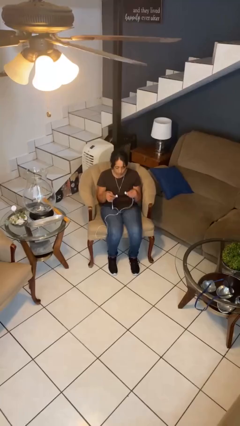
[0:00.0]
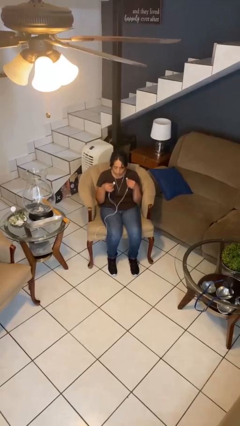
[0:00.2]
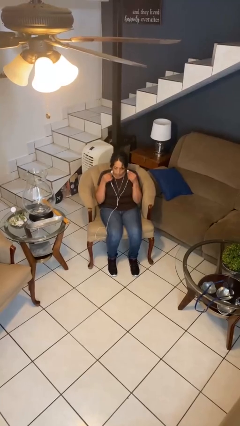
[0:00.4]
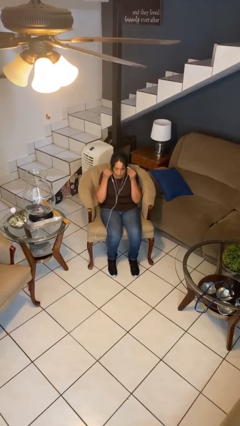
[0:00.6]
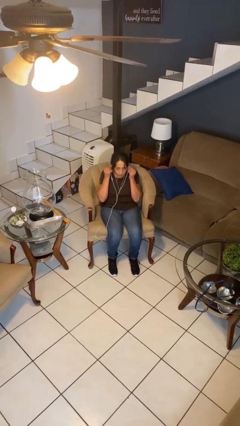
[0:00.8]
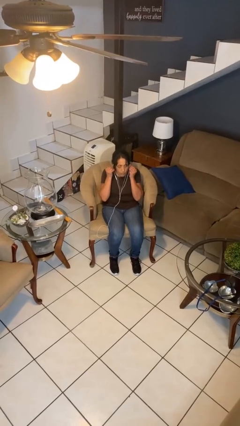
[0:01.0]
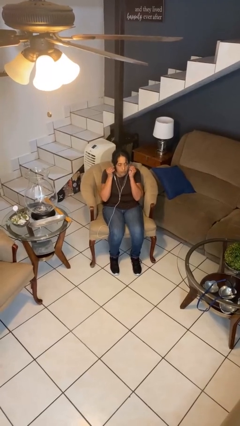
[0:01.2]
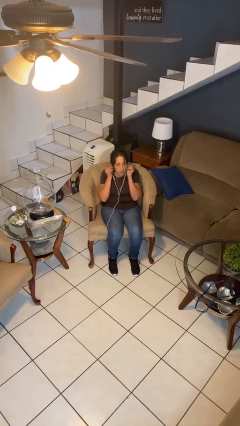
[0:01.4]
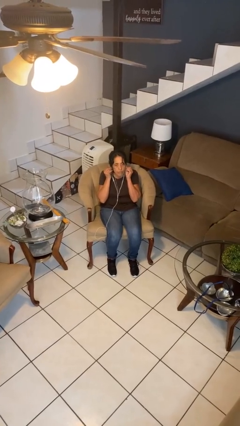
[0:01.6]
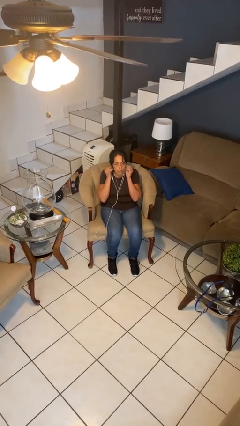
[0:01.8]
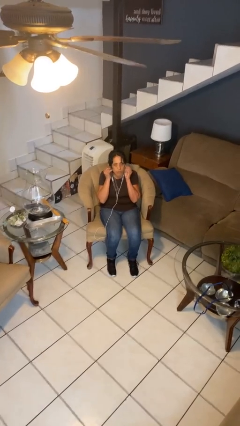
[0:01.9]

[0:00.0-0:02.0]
person puts on headphones

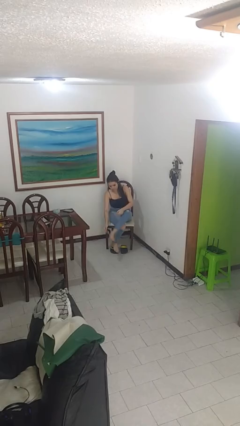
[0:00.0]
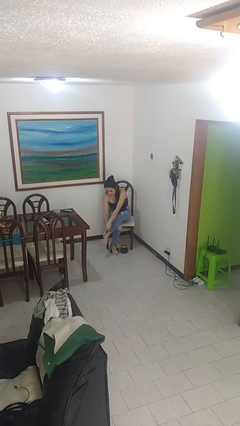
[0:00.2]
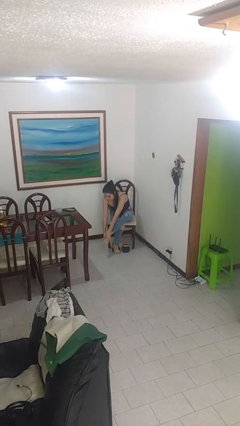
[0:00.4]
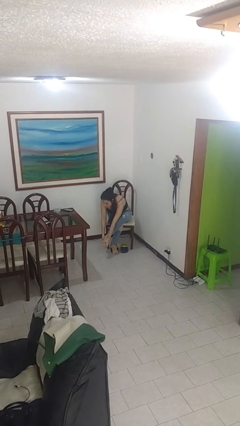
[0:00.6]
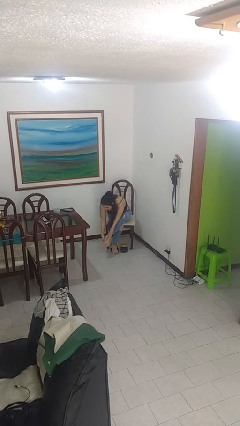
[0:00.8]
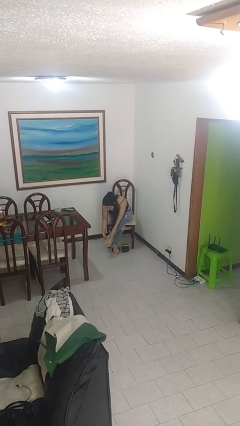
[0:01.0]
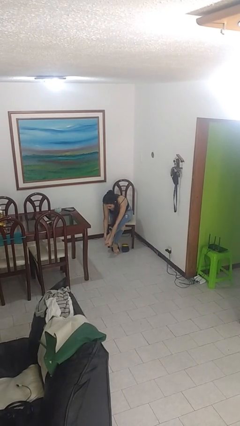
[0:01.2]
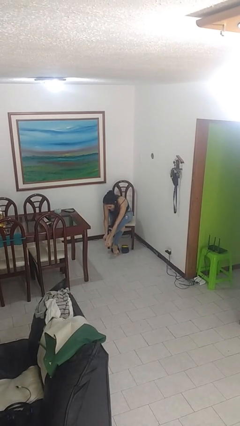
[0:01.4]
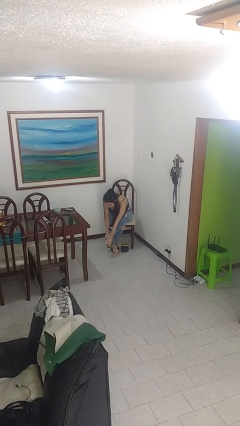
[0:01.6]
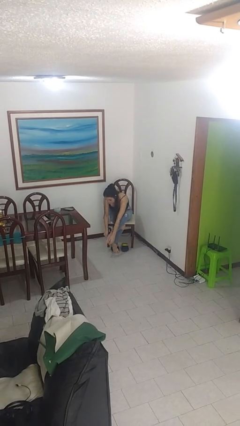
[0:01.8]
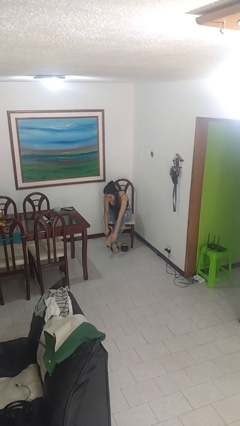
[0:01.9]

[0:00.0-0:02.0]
person rubs foot

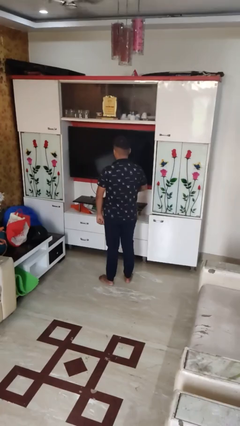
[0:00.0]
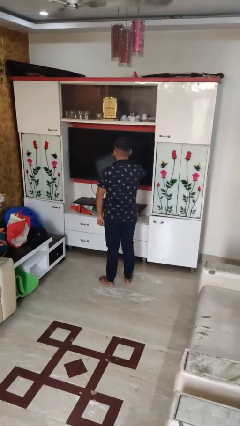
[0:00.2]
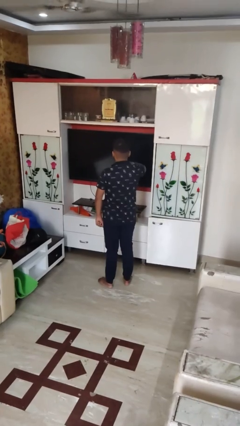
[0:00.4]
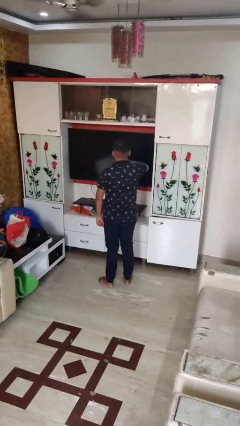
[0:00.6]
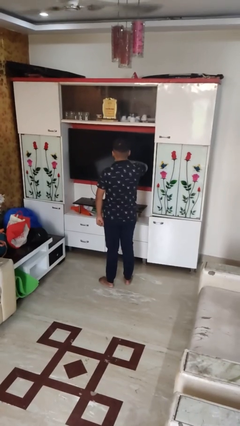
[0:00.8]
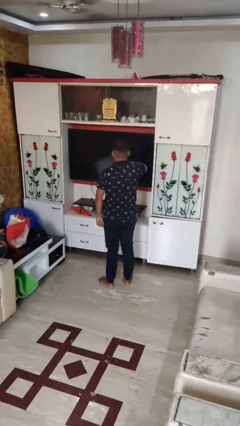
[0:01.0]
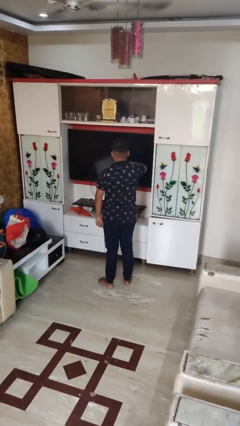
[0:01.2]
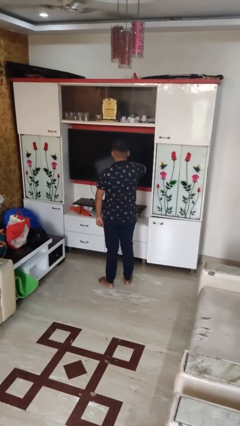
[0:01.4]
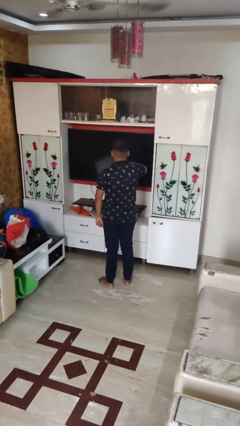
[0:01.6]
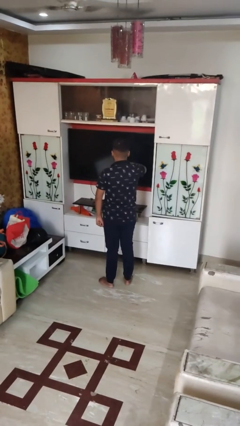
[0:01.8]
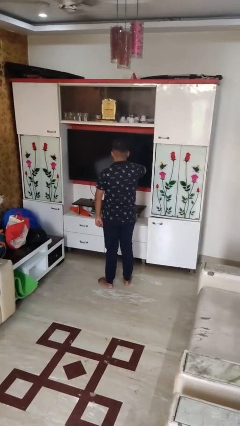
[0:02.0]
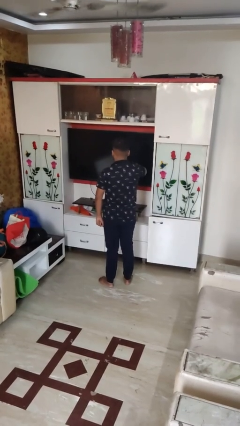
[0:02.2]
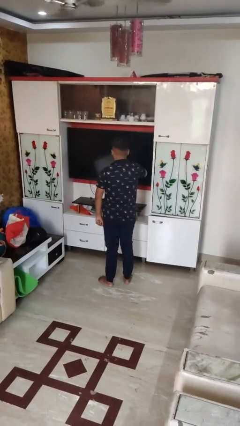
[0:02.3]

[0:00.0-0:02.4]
person strokes chin

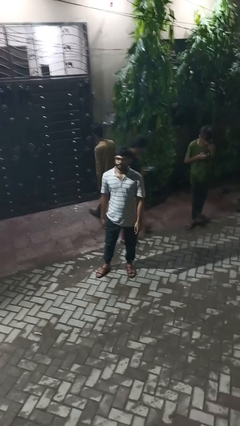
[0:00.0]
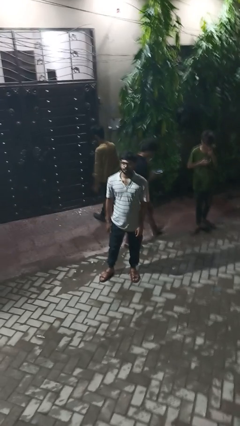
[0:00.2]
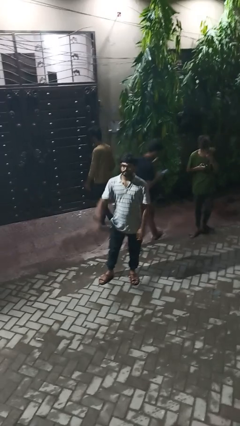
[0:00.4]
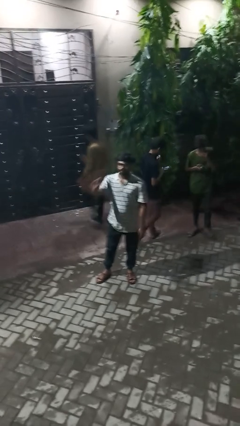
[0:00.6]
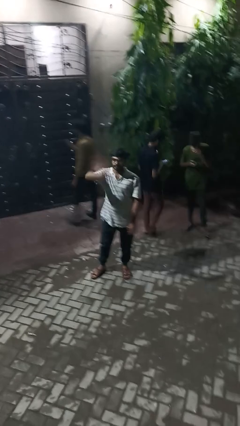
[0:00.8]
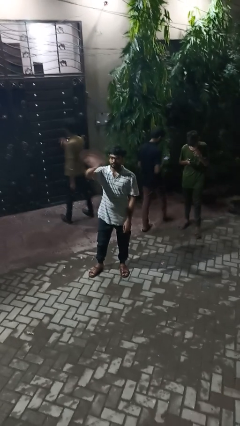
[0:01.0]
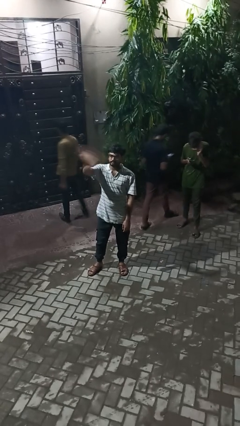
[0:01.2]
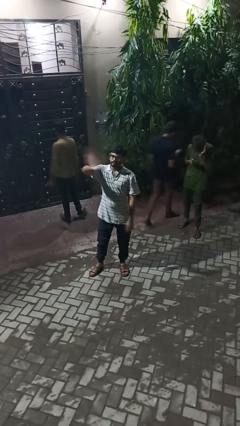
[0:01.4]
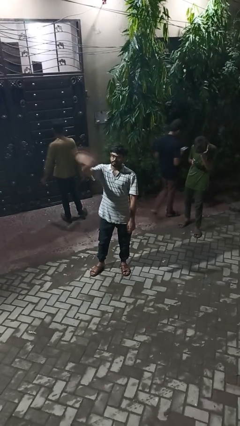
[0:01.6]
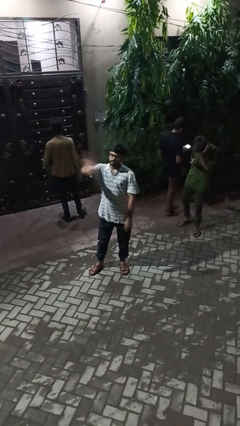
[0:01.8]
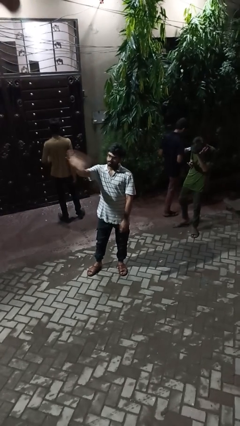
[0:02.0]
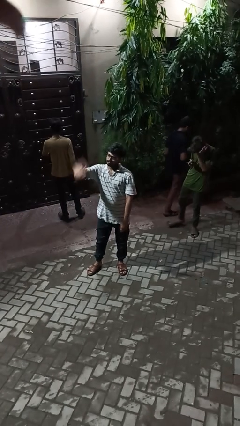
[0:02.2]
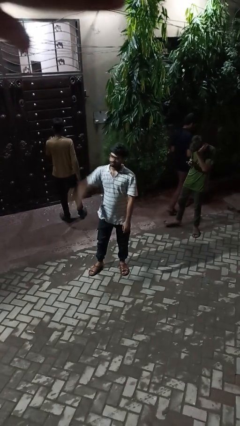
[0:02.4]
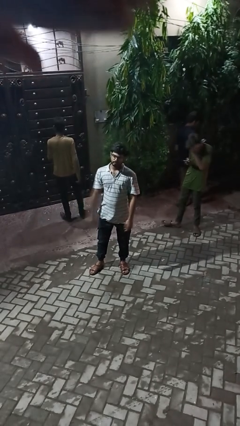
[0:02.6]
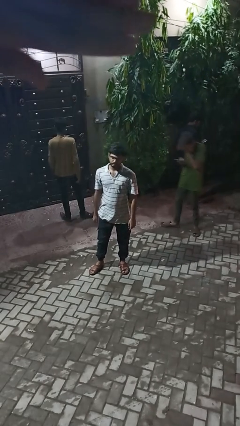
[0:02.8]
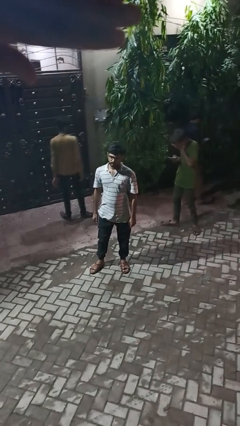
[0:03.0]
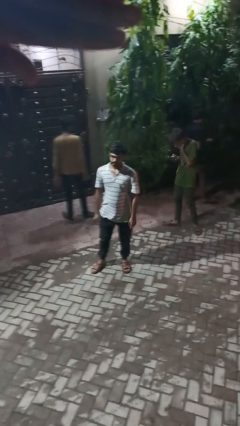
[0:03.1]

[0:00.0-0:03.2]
person waves at person

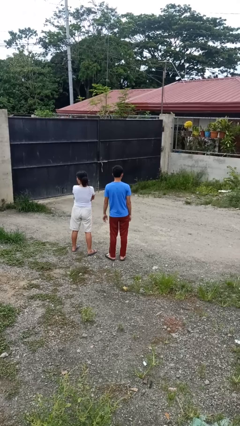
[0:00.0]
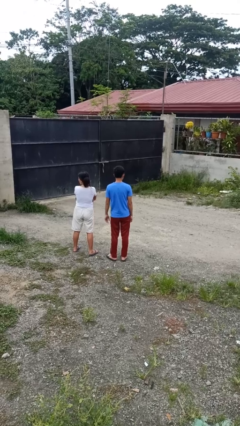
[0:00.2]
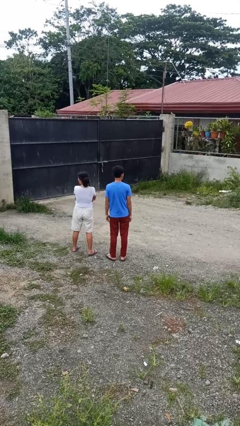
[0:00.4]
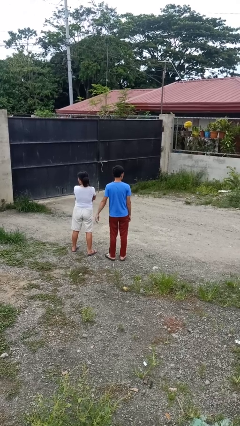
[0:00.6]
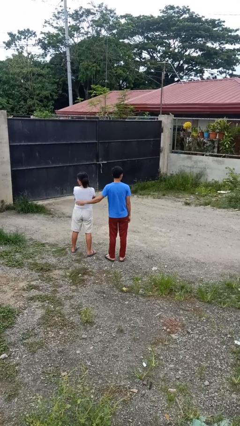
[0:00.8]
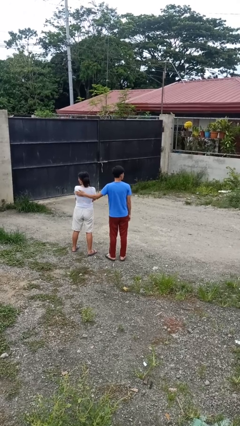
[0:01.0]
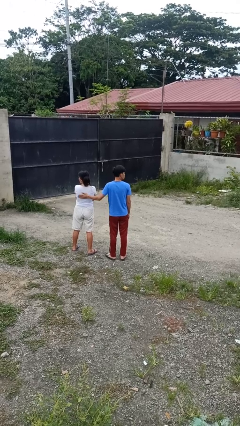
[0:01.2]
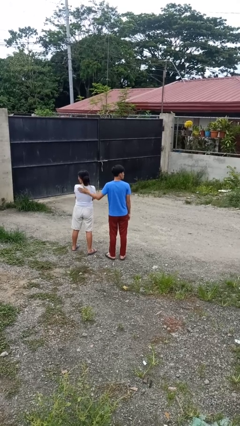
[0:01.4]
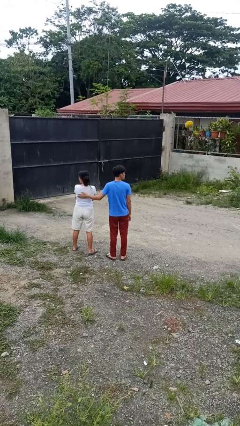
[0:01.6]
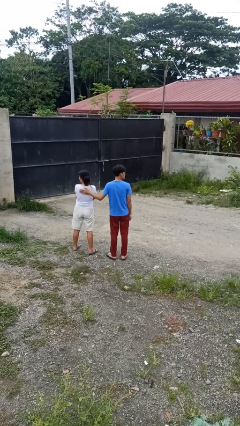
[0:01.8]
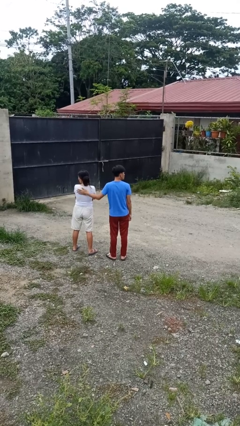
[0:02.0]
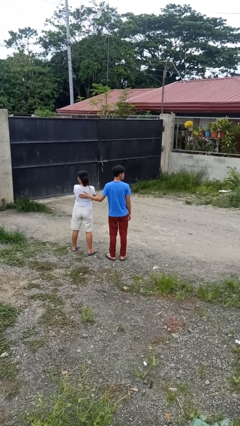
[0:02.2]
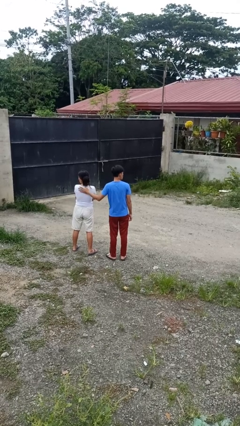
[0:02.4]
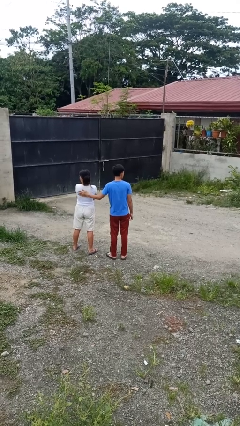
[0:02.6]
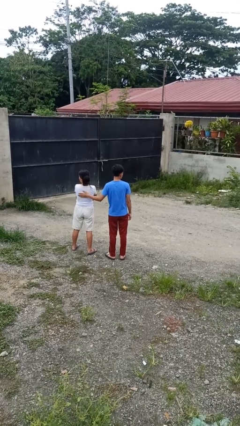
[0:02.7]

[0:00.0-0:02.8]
person touches back of person

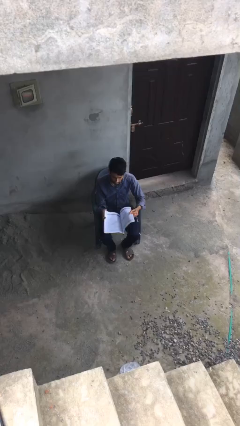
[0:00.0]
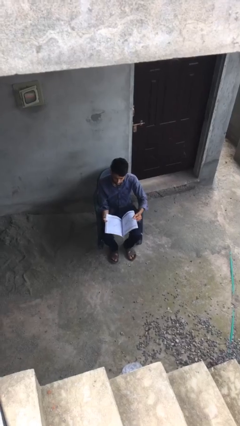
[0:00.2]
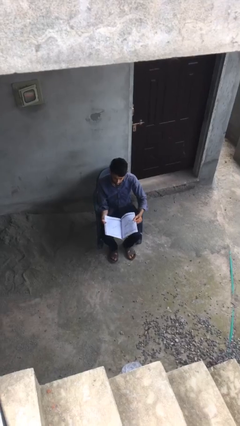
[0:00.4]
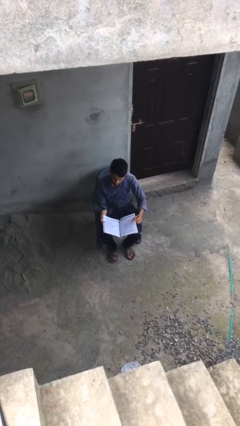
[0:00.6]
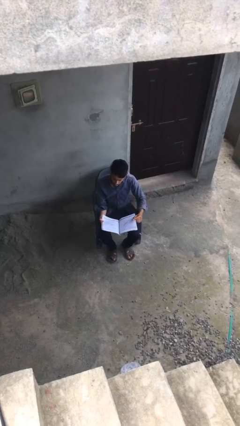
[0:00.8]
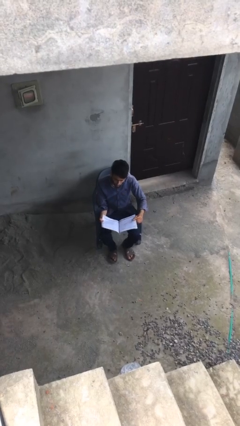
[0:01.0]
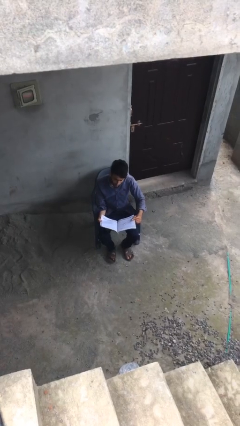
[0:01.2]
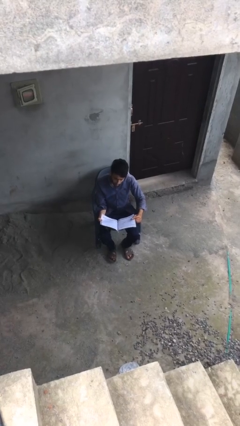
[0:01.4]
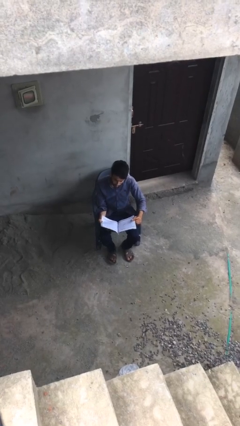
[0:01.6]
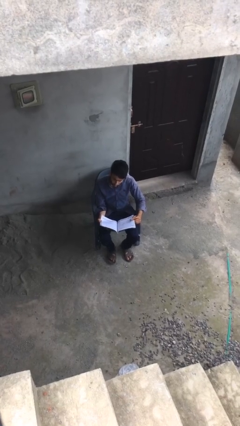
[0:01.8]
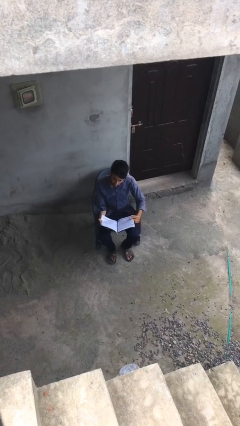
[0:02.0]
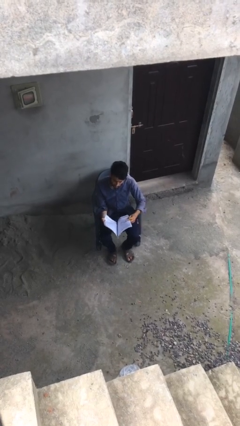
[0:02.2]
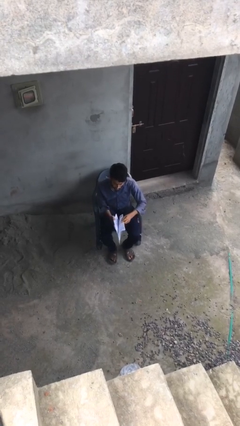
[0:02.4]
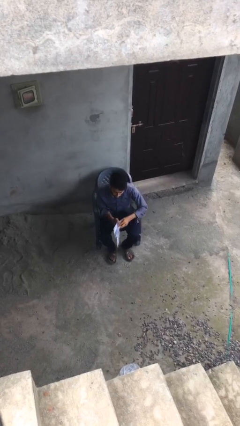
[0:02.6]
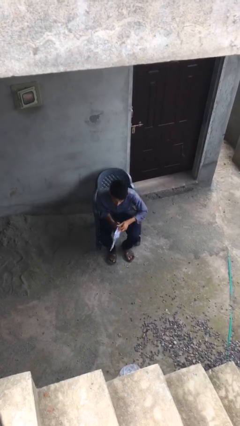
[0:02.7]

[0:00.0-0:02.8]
person reads document

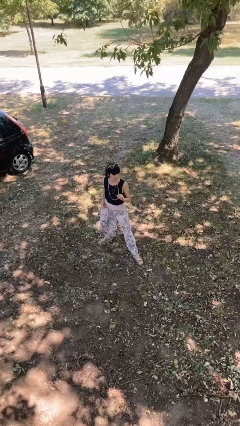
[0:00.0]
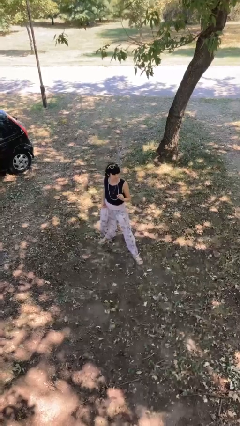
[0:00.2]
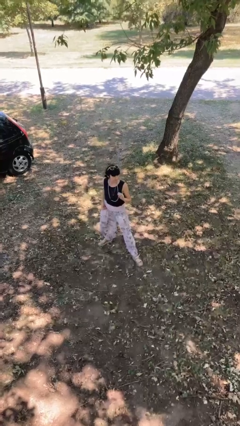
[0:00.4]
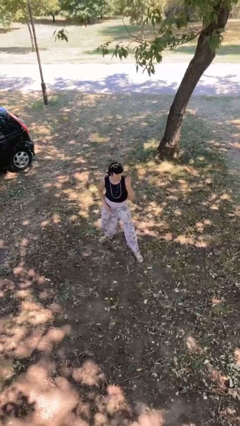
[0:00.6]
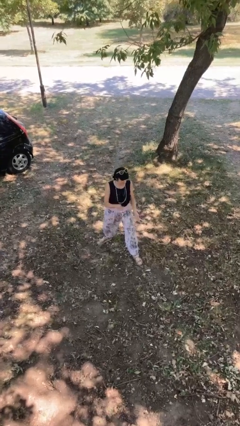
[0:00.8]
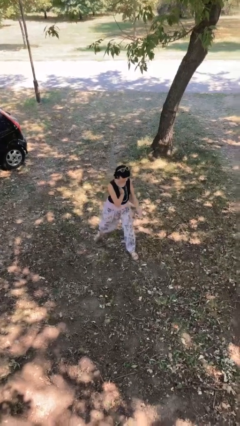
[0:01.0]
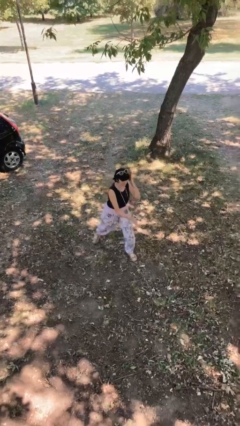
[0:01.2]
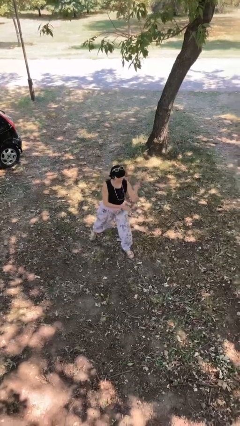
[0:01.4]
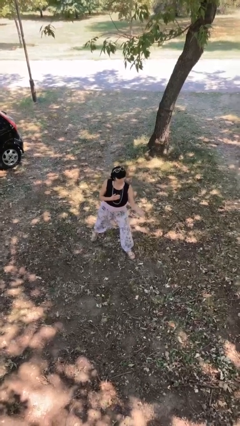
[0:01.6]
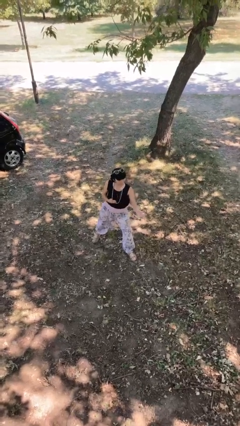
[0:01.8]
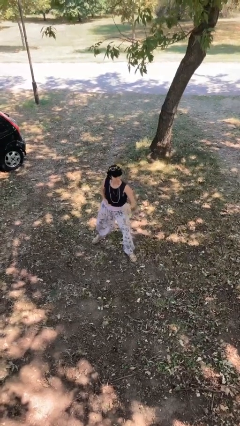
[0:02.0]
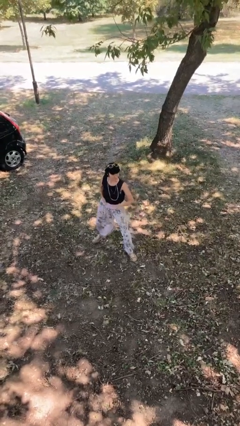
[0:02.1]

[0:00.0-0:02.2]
person karate chop
